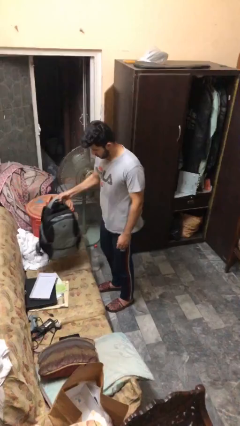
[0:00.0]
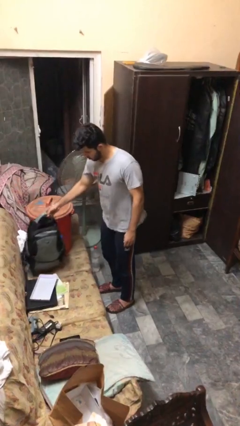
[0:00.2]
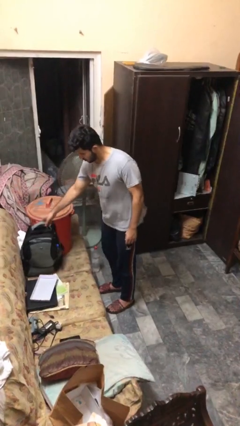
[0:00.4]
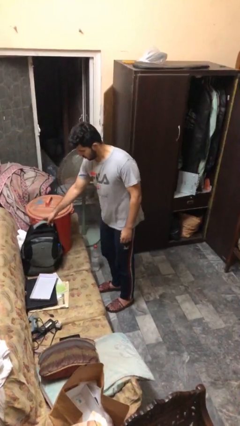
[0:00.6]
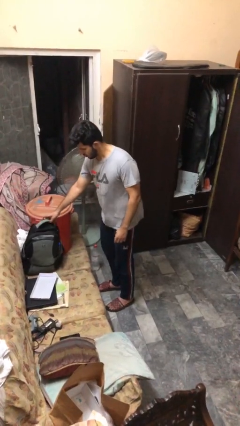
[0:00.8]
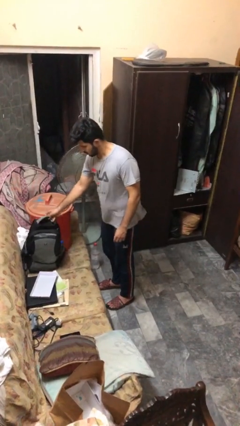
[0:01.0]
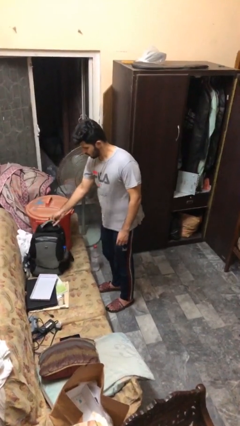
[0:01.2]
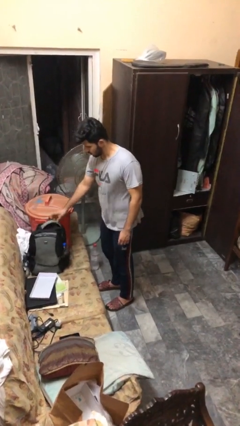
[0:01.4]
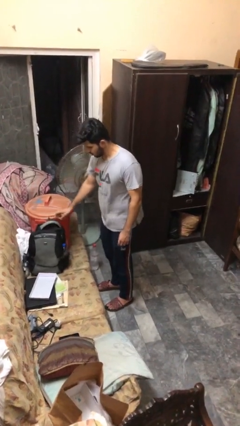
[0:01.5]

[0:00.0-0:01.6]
person puts down object on couch

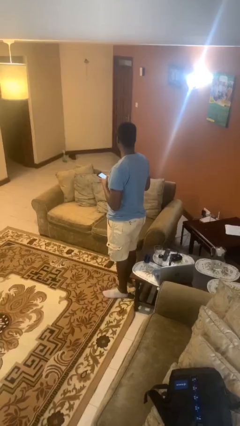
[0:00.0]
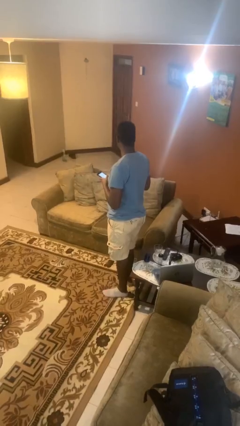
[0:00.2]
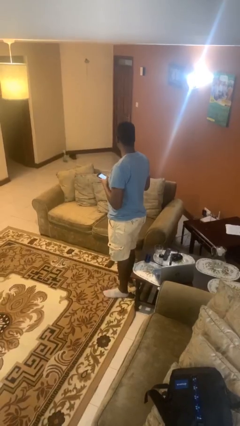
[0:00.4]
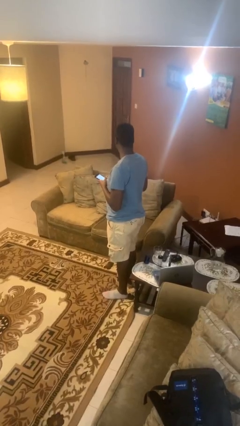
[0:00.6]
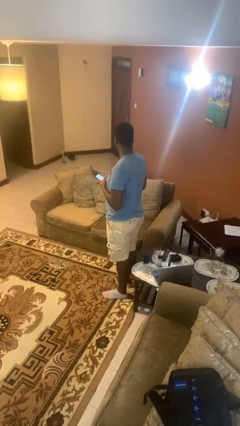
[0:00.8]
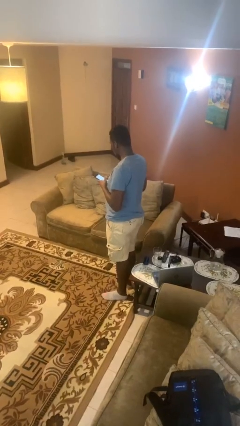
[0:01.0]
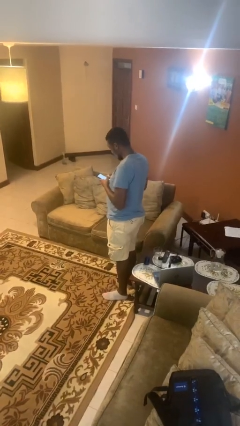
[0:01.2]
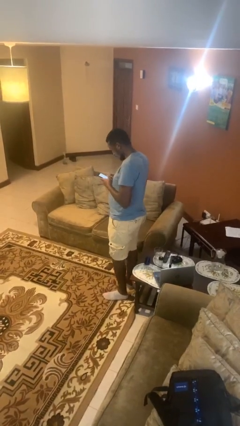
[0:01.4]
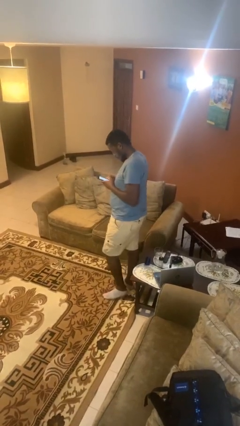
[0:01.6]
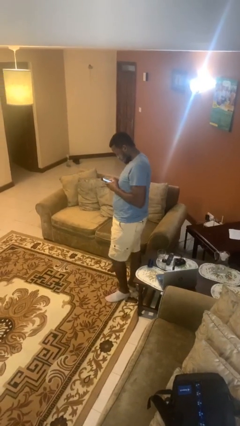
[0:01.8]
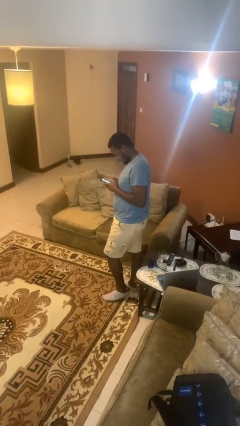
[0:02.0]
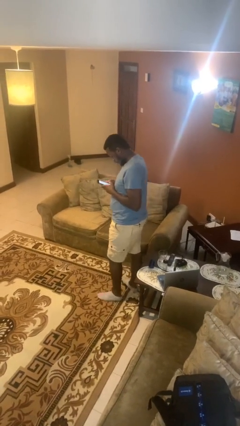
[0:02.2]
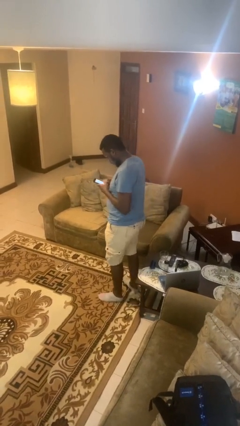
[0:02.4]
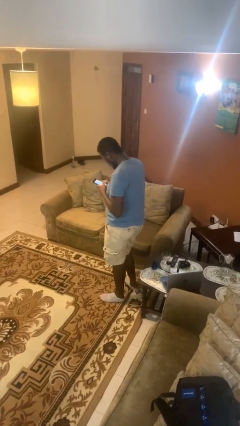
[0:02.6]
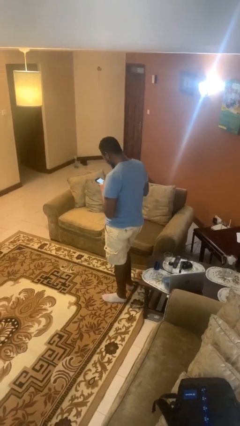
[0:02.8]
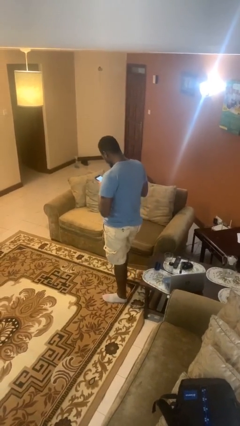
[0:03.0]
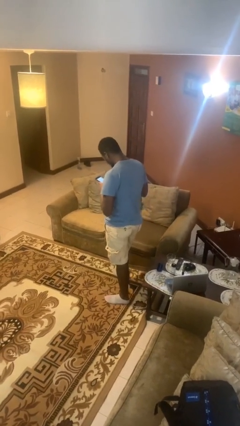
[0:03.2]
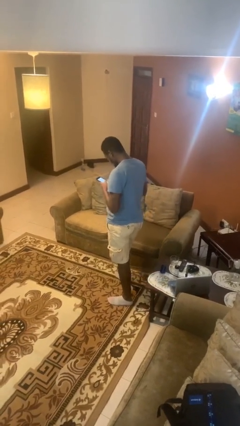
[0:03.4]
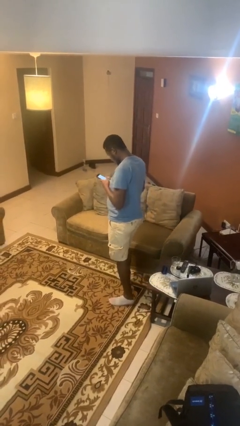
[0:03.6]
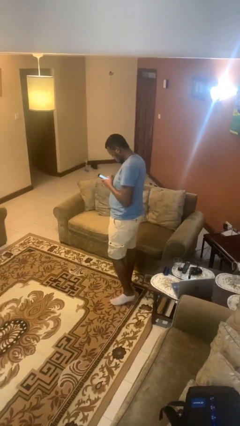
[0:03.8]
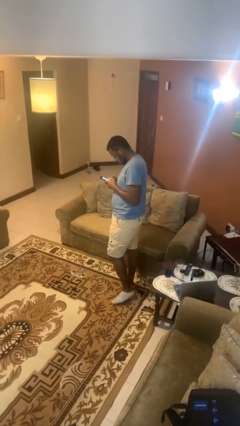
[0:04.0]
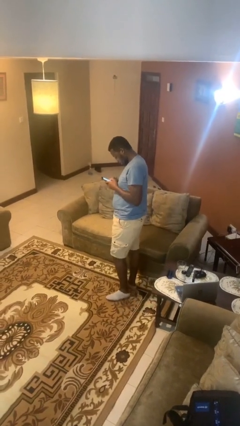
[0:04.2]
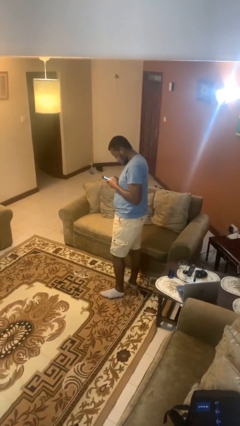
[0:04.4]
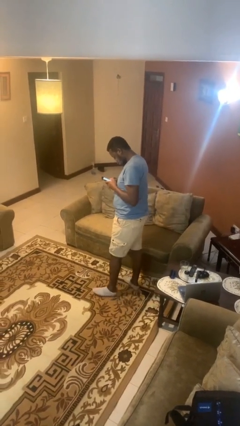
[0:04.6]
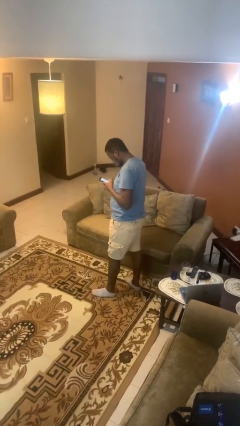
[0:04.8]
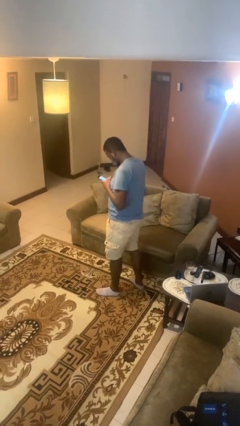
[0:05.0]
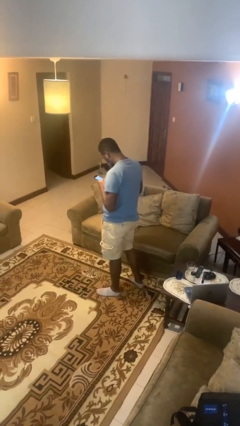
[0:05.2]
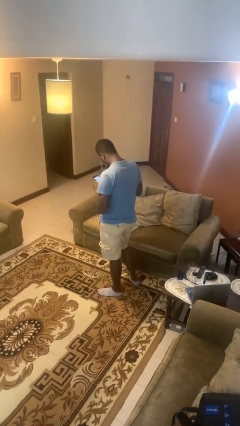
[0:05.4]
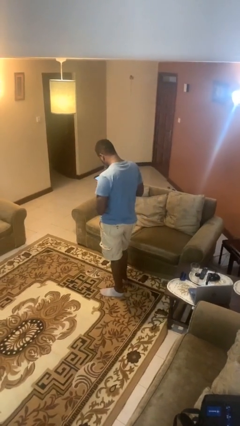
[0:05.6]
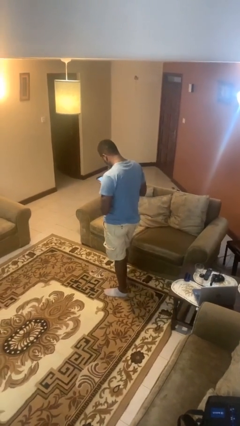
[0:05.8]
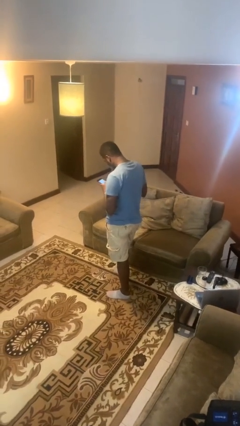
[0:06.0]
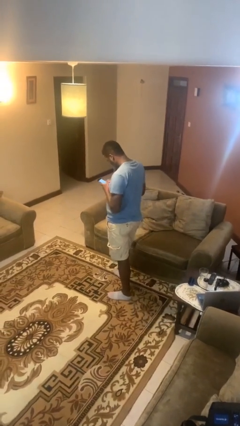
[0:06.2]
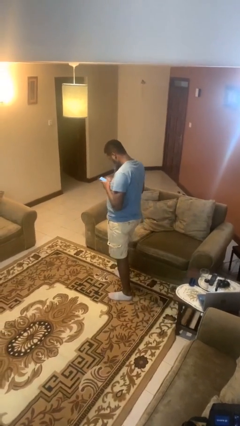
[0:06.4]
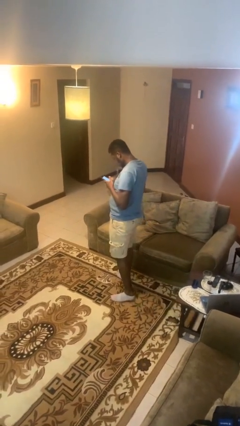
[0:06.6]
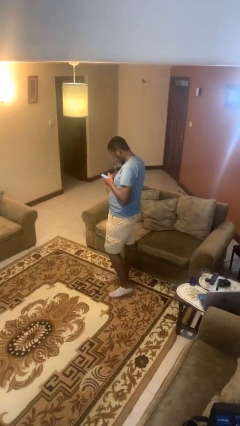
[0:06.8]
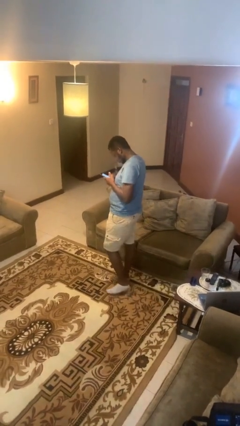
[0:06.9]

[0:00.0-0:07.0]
person texts on phone

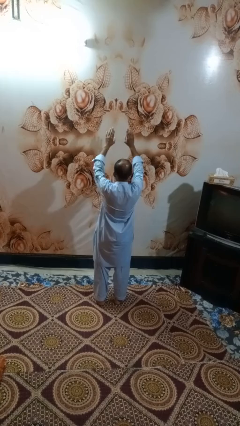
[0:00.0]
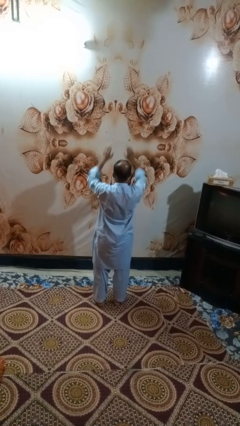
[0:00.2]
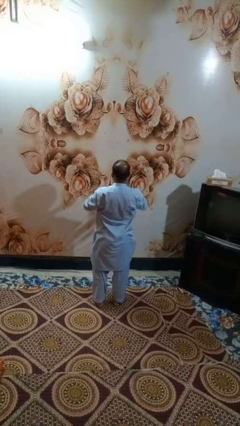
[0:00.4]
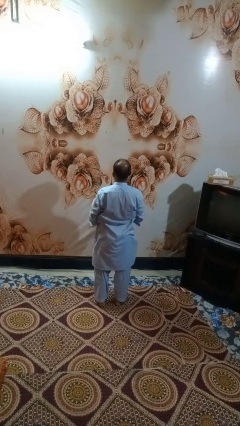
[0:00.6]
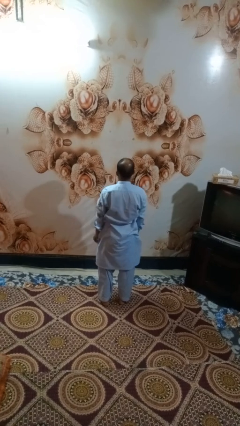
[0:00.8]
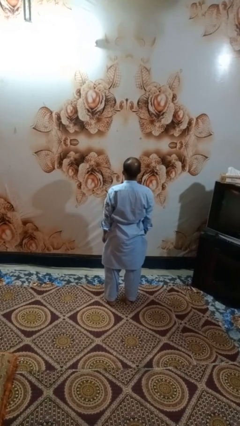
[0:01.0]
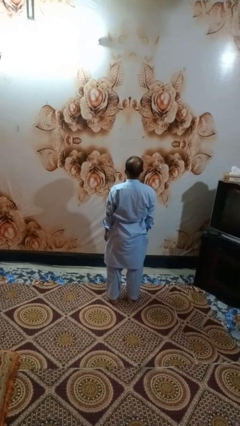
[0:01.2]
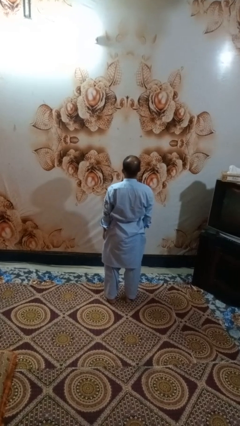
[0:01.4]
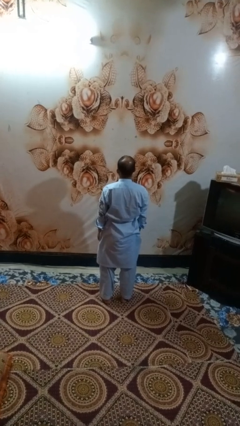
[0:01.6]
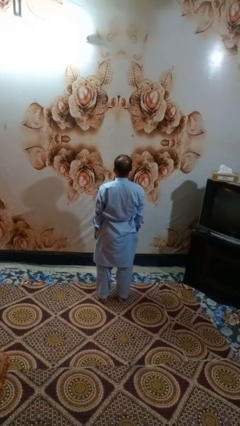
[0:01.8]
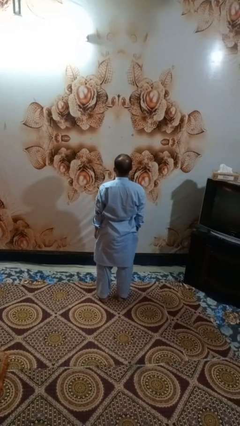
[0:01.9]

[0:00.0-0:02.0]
person gestures swipe down

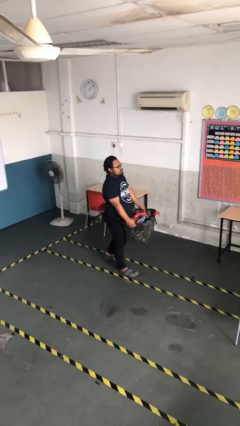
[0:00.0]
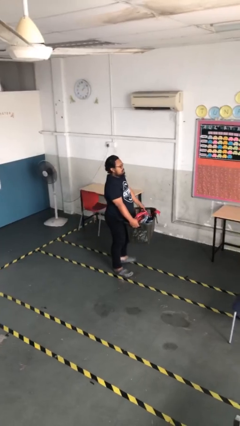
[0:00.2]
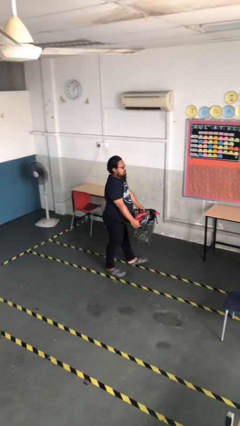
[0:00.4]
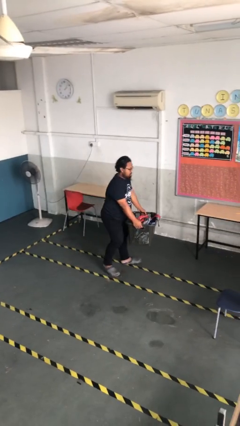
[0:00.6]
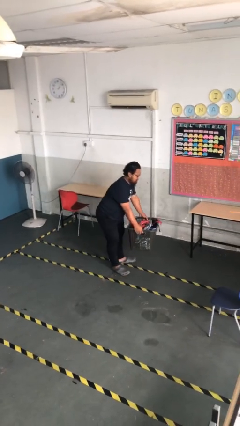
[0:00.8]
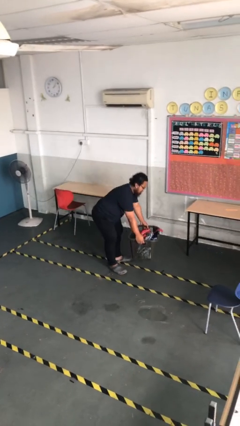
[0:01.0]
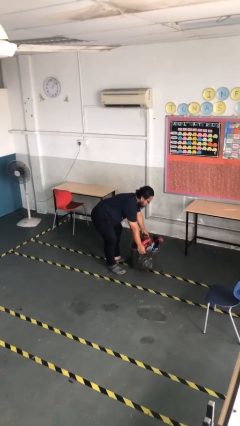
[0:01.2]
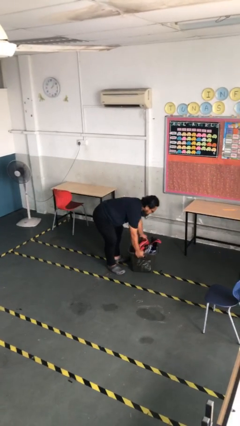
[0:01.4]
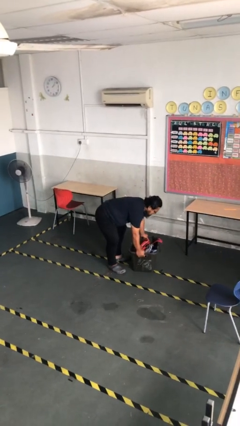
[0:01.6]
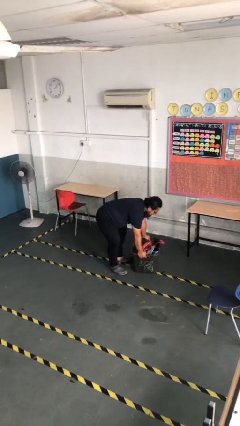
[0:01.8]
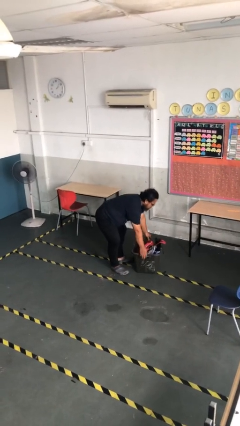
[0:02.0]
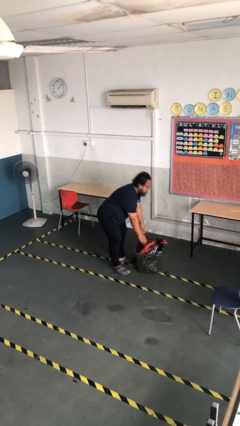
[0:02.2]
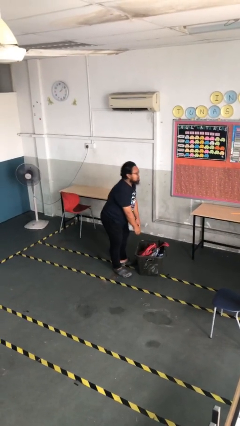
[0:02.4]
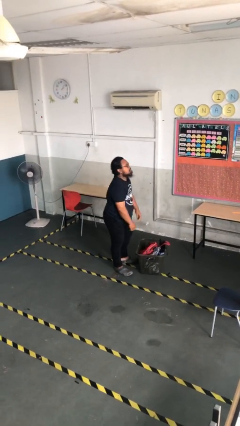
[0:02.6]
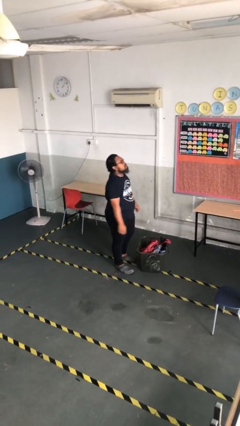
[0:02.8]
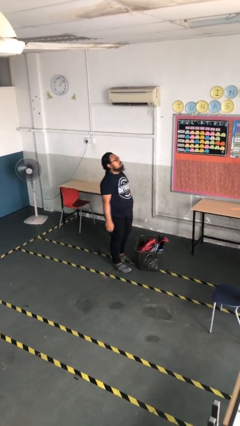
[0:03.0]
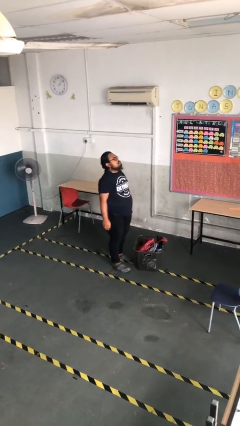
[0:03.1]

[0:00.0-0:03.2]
person puts down object on floor

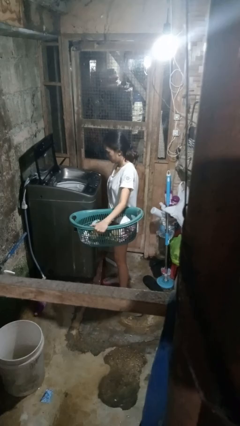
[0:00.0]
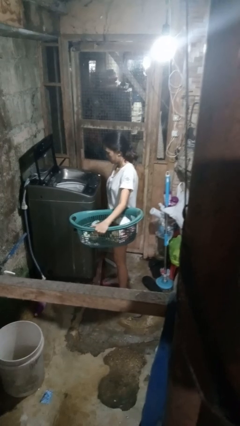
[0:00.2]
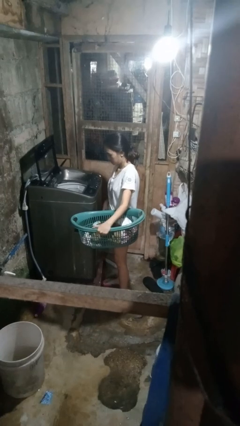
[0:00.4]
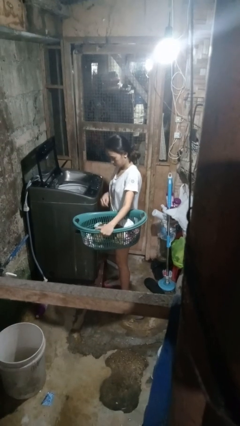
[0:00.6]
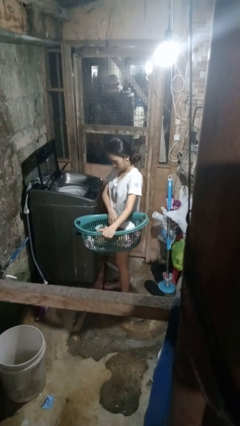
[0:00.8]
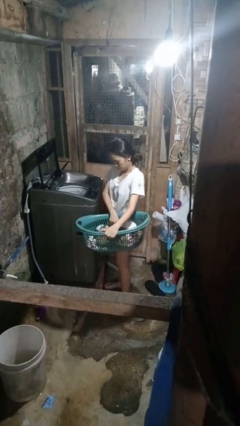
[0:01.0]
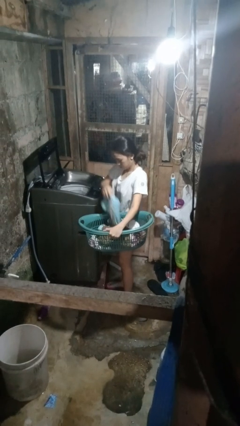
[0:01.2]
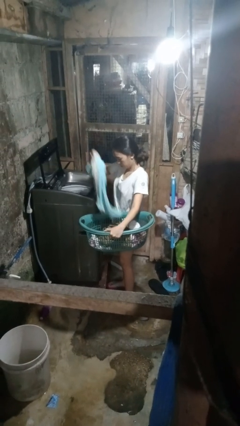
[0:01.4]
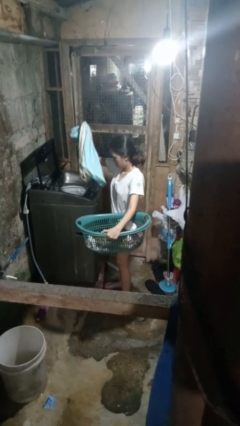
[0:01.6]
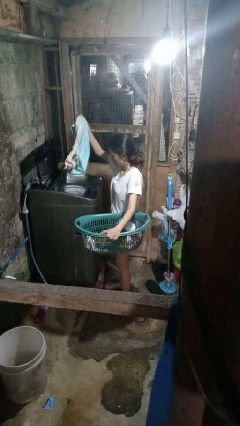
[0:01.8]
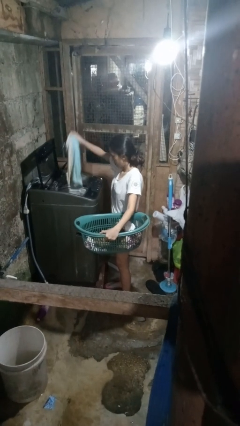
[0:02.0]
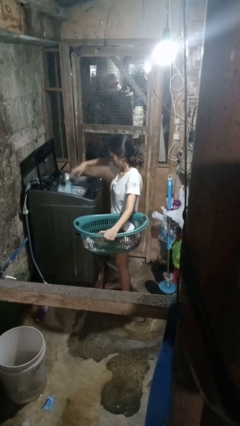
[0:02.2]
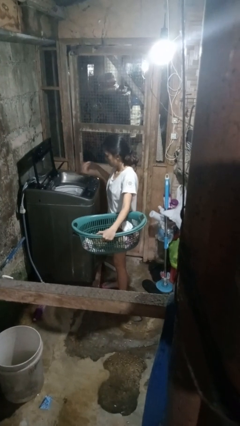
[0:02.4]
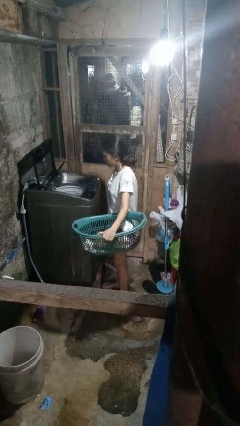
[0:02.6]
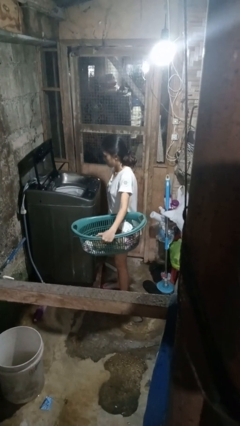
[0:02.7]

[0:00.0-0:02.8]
person loads clotheswasher

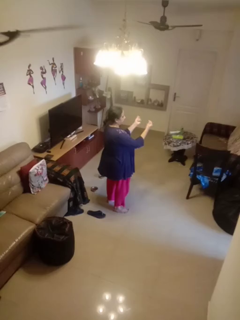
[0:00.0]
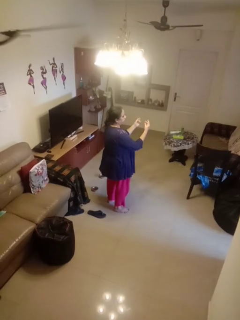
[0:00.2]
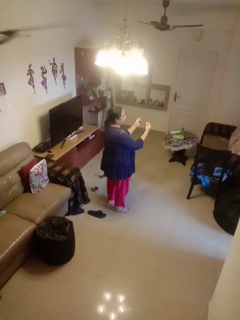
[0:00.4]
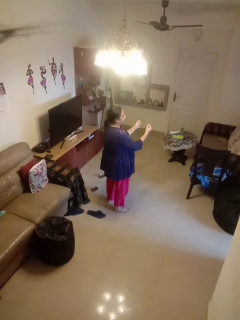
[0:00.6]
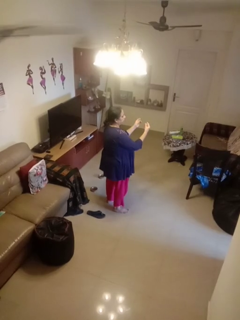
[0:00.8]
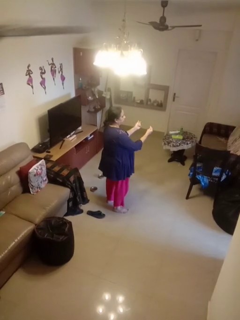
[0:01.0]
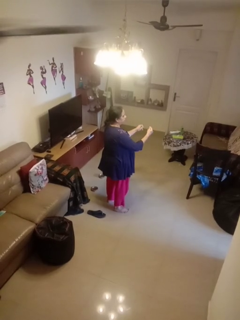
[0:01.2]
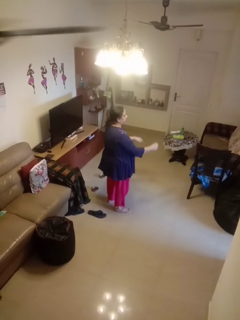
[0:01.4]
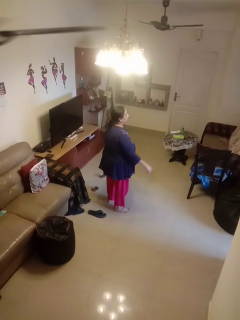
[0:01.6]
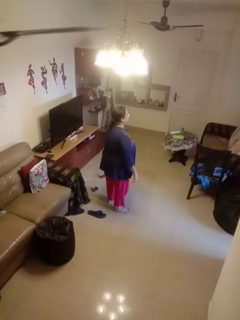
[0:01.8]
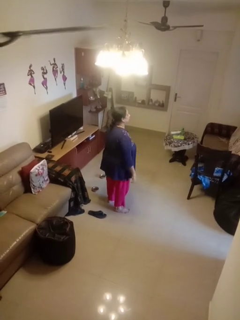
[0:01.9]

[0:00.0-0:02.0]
person snaps fingers
